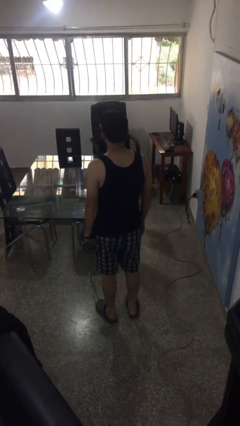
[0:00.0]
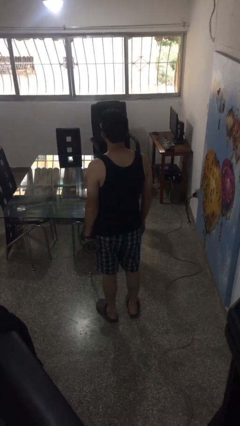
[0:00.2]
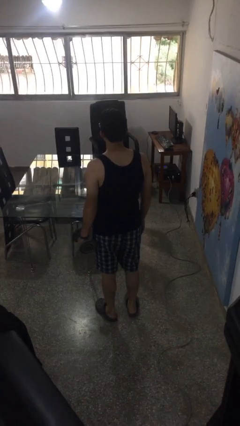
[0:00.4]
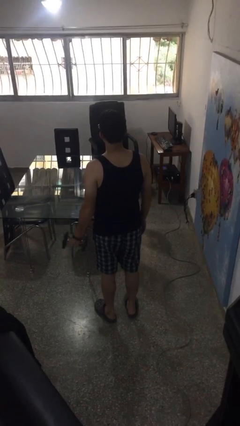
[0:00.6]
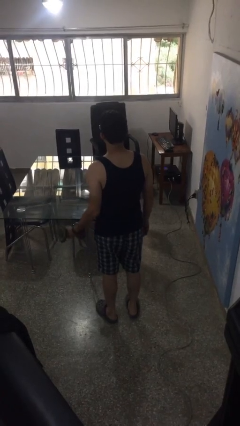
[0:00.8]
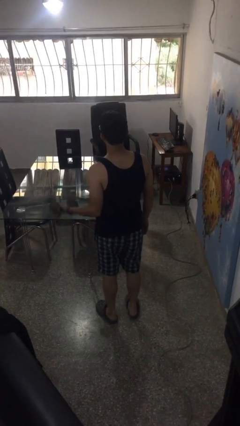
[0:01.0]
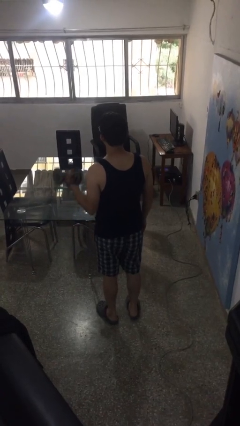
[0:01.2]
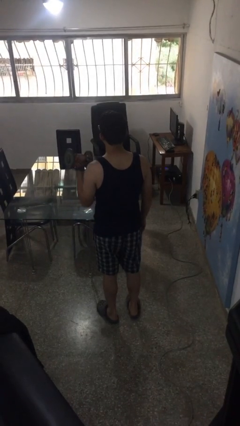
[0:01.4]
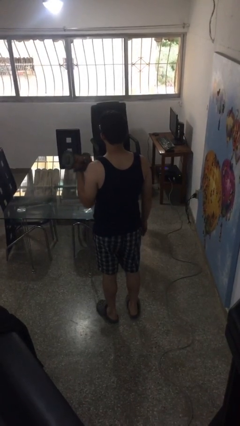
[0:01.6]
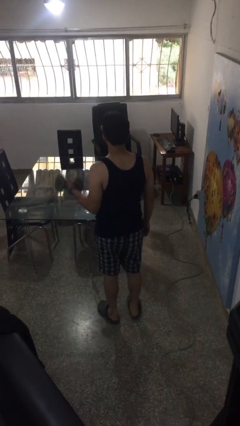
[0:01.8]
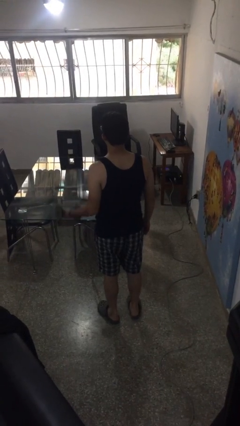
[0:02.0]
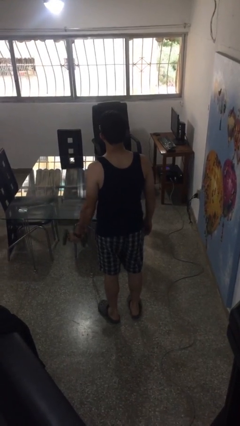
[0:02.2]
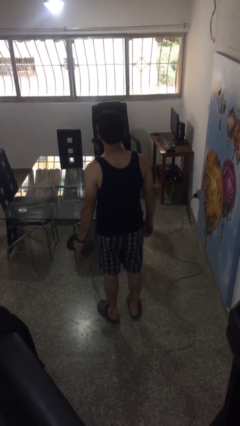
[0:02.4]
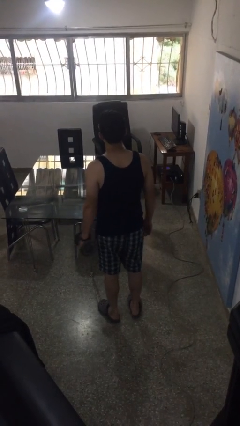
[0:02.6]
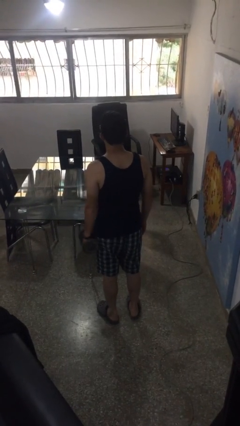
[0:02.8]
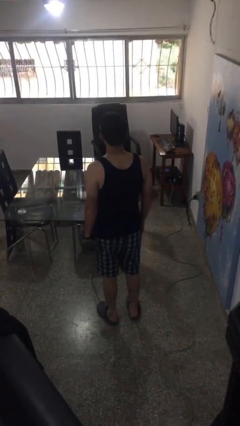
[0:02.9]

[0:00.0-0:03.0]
person lifts dumbbells

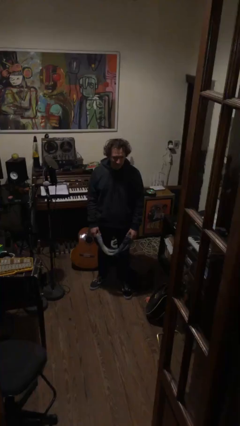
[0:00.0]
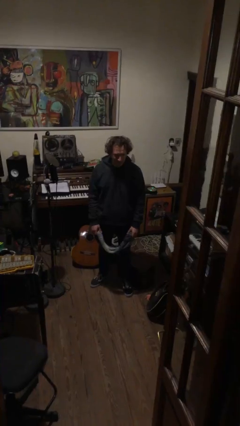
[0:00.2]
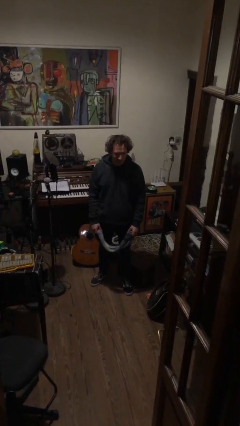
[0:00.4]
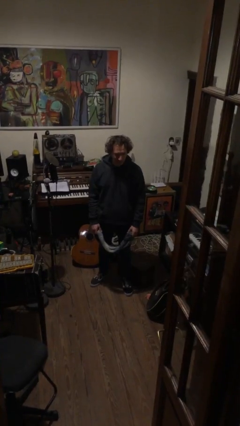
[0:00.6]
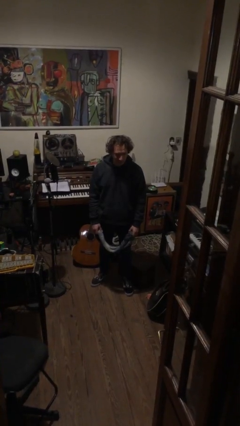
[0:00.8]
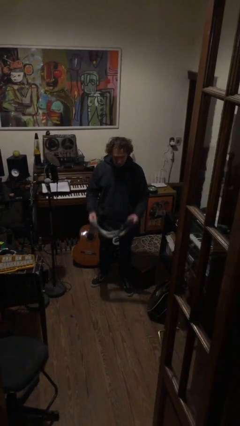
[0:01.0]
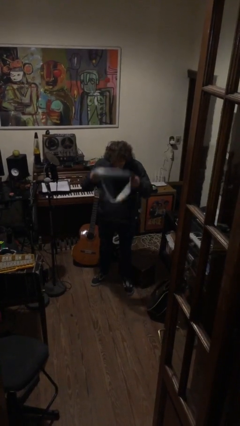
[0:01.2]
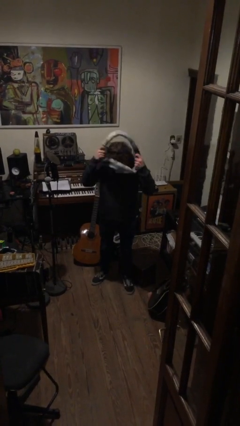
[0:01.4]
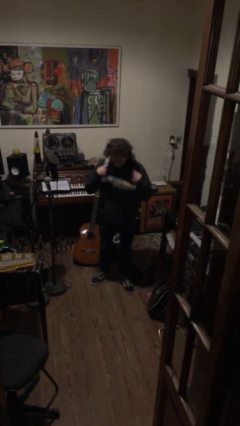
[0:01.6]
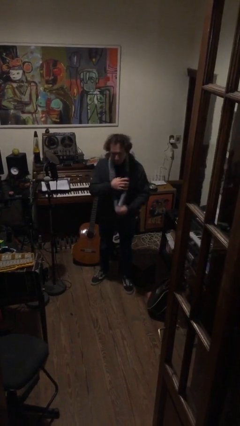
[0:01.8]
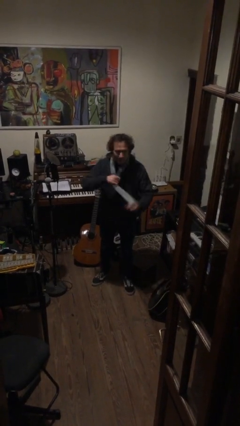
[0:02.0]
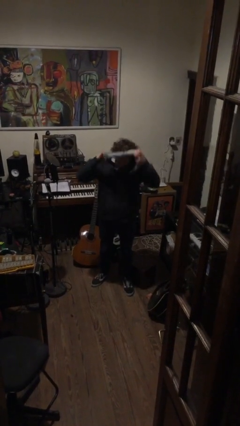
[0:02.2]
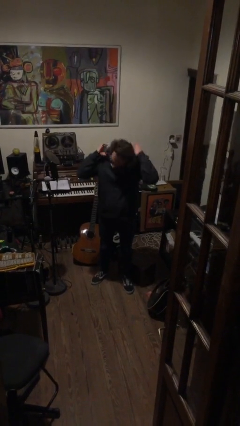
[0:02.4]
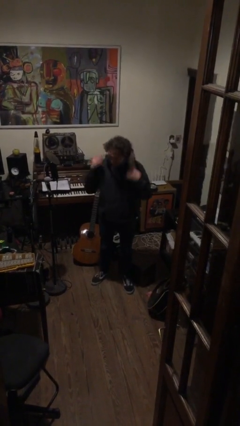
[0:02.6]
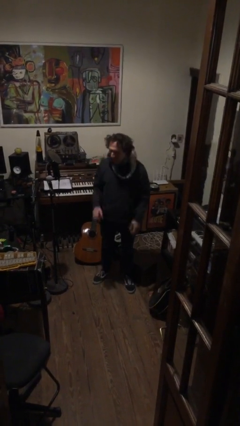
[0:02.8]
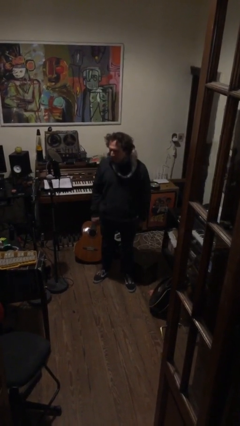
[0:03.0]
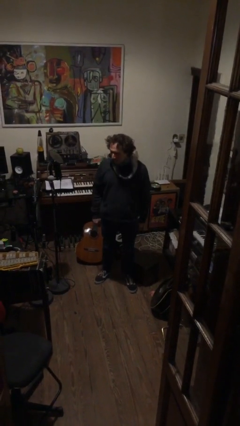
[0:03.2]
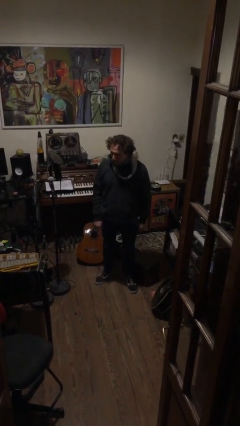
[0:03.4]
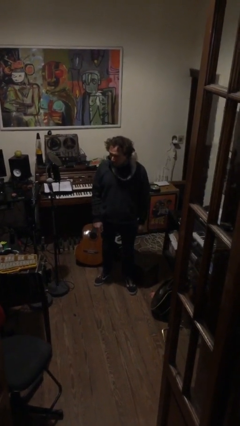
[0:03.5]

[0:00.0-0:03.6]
person puts on scarf

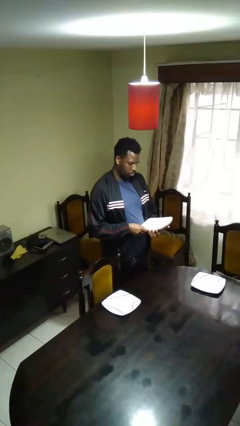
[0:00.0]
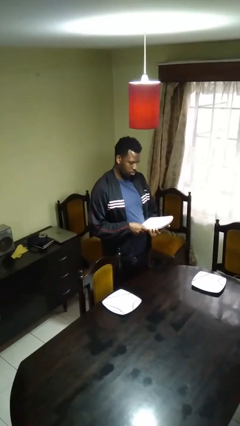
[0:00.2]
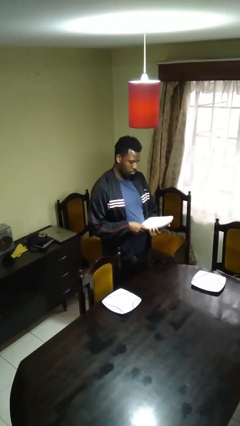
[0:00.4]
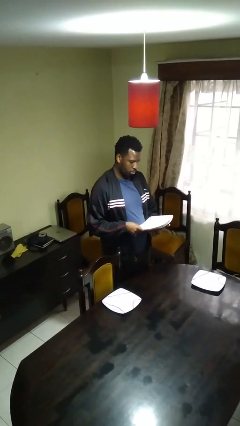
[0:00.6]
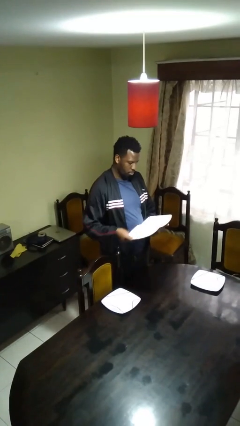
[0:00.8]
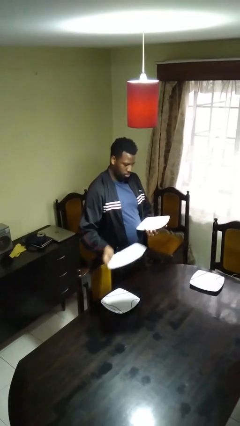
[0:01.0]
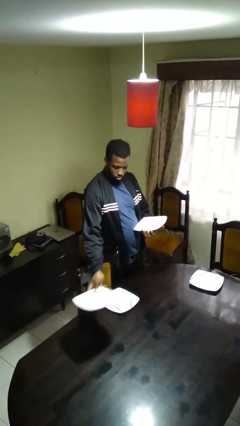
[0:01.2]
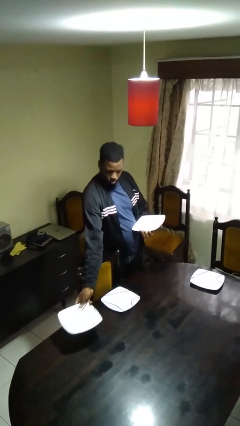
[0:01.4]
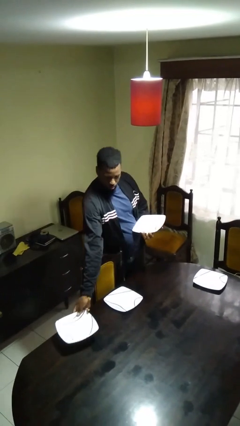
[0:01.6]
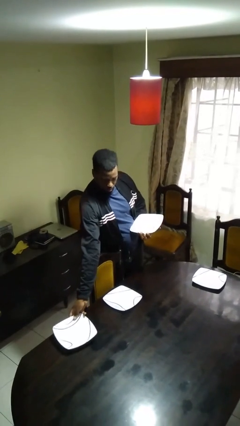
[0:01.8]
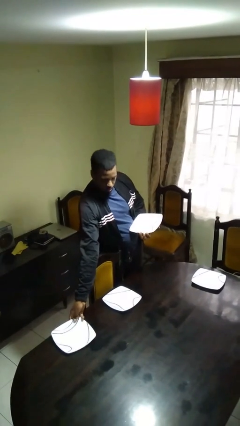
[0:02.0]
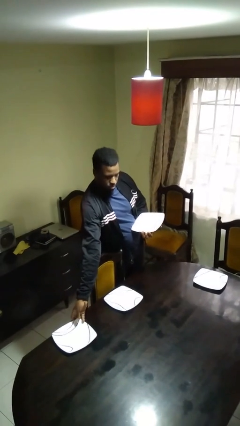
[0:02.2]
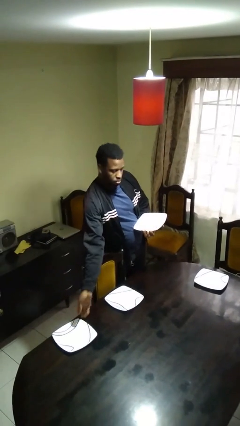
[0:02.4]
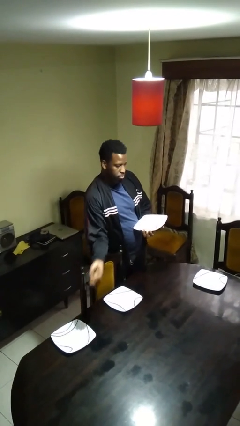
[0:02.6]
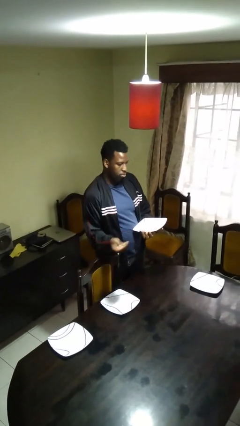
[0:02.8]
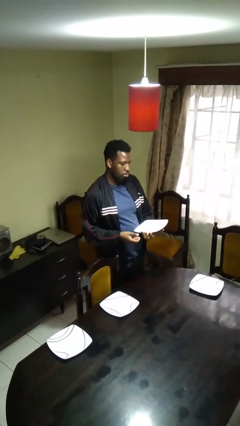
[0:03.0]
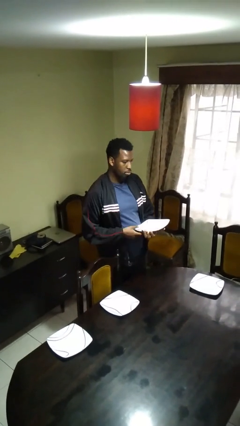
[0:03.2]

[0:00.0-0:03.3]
person sets table

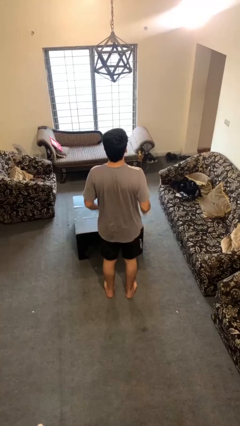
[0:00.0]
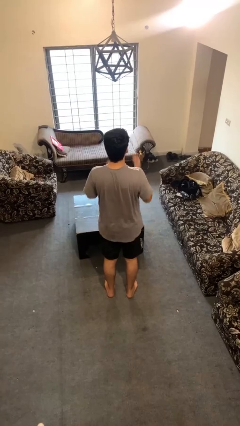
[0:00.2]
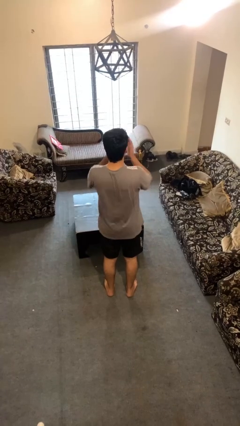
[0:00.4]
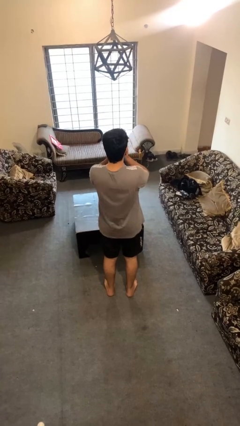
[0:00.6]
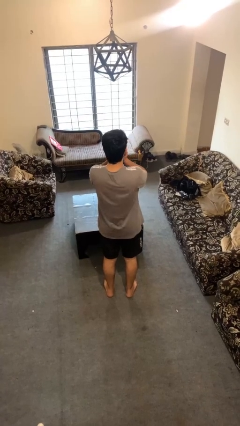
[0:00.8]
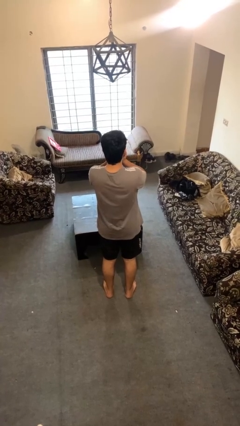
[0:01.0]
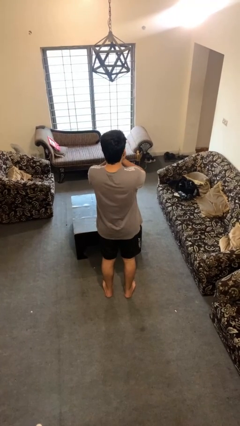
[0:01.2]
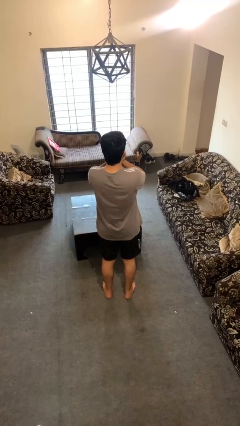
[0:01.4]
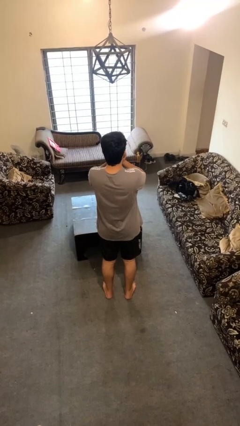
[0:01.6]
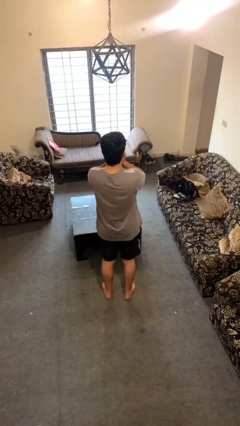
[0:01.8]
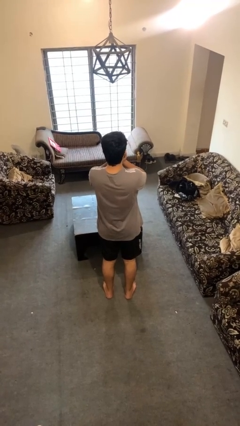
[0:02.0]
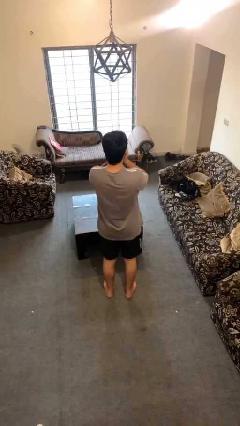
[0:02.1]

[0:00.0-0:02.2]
person covers face with hands

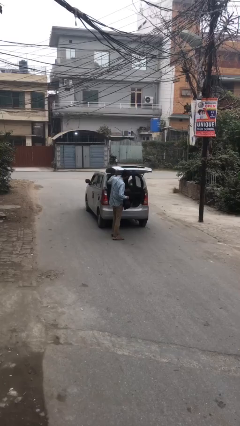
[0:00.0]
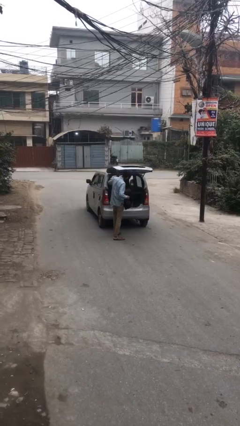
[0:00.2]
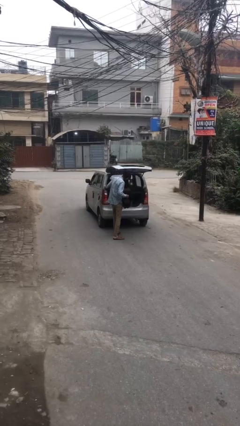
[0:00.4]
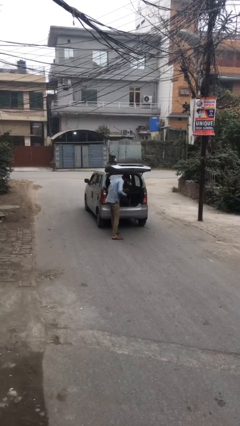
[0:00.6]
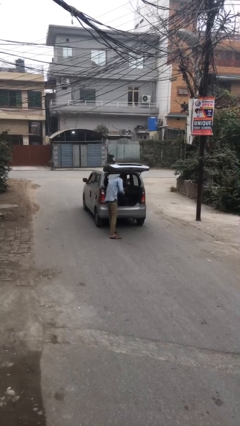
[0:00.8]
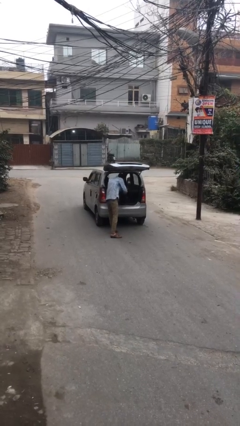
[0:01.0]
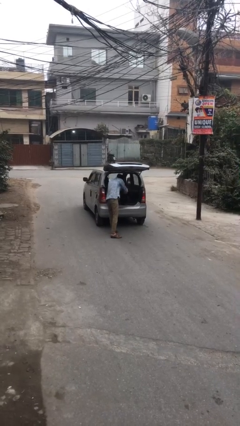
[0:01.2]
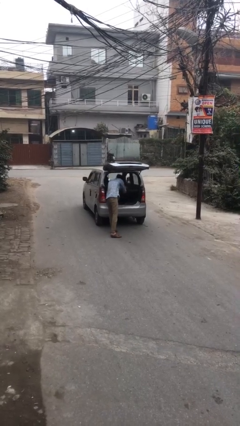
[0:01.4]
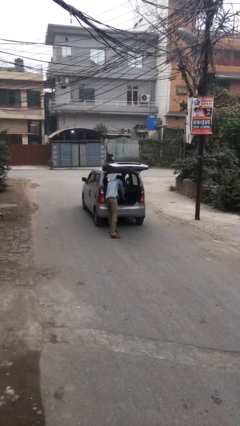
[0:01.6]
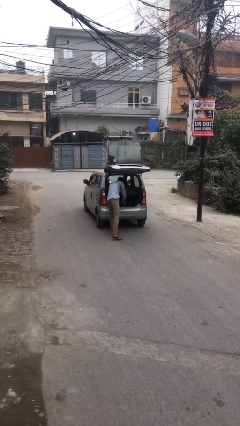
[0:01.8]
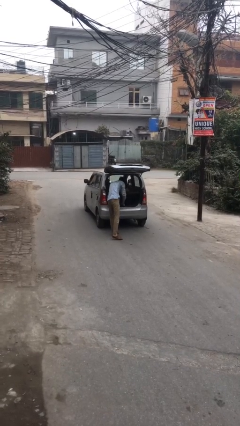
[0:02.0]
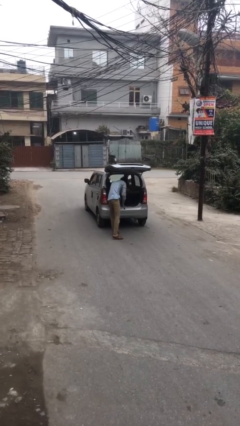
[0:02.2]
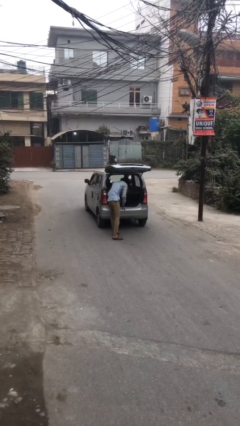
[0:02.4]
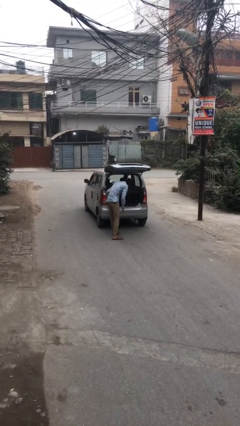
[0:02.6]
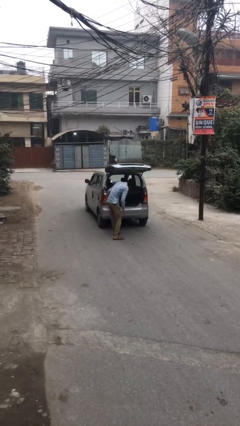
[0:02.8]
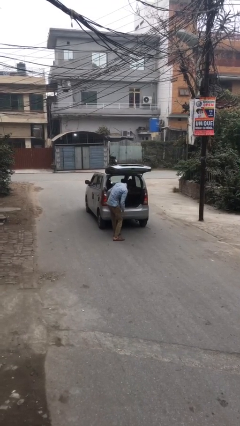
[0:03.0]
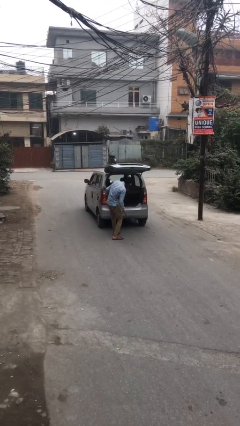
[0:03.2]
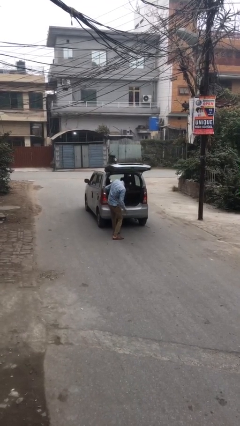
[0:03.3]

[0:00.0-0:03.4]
person loads car

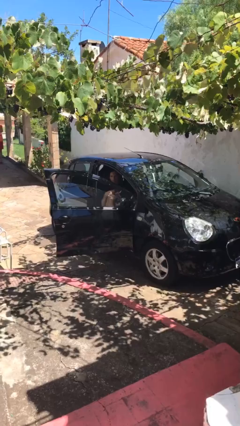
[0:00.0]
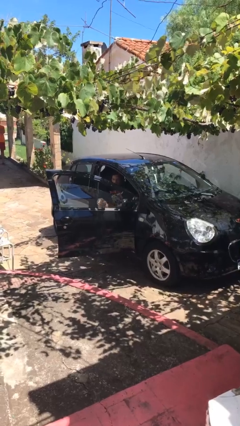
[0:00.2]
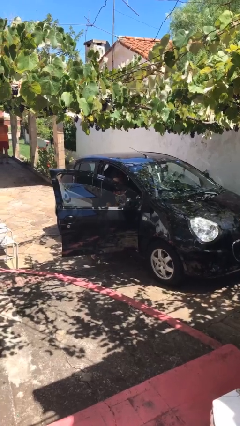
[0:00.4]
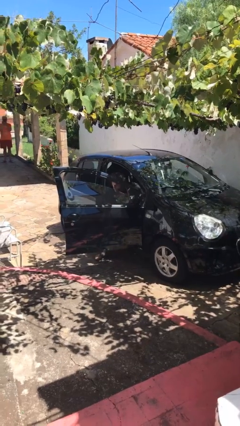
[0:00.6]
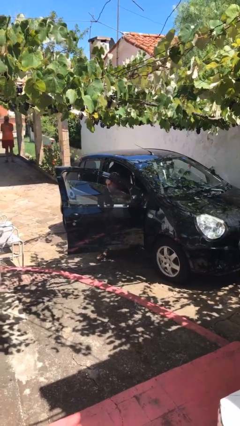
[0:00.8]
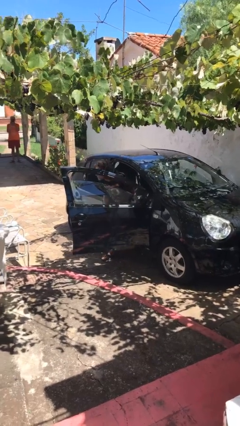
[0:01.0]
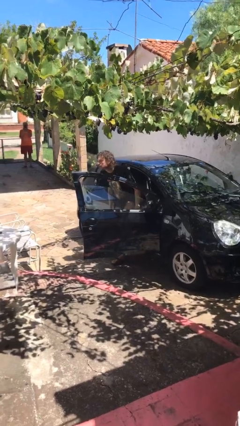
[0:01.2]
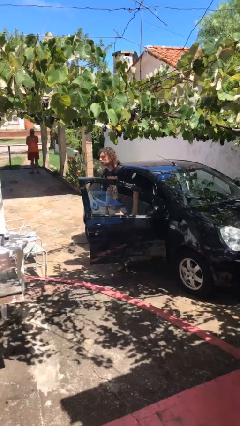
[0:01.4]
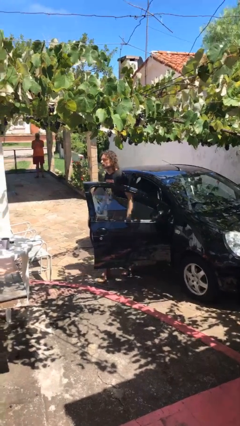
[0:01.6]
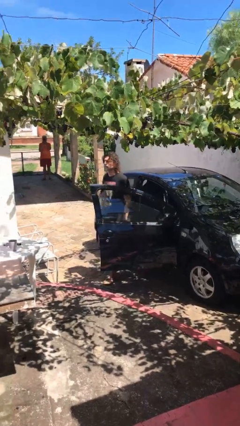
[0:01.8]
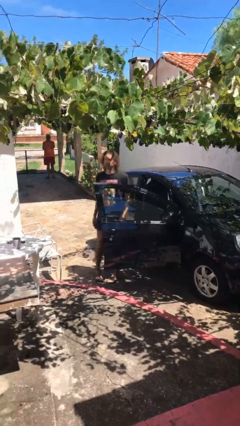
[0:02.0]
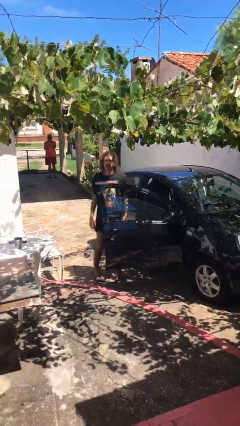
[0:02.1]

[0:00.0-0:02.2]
person exits car
